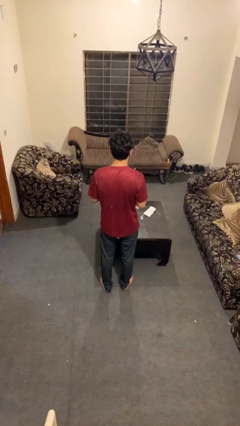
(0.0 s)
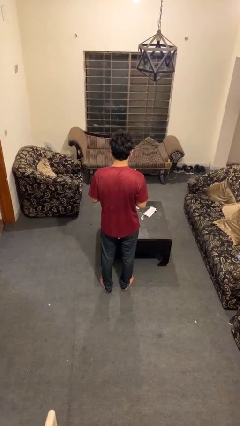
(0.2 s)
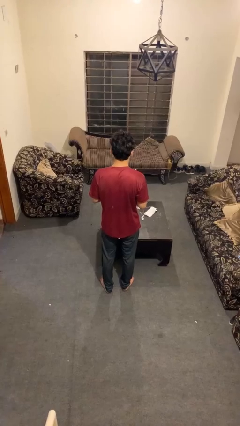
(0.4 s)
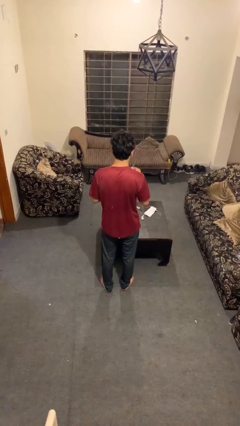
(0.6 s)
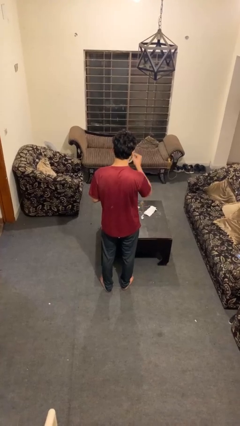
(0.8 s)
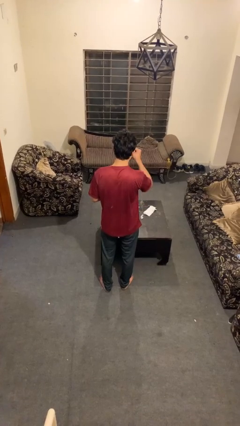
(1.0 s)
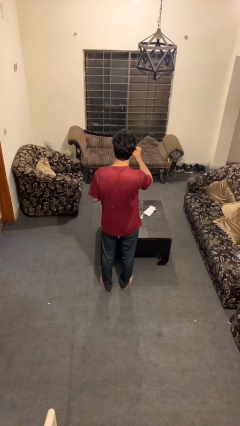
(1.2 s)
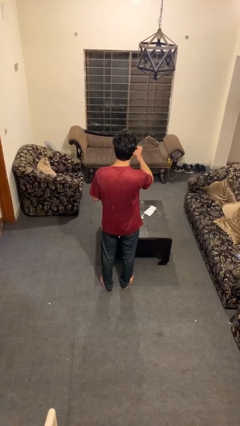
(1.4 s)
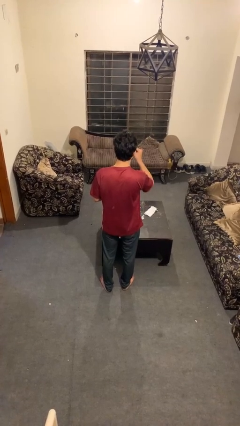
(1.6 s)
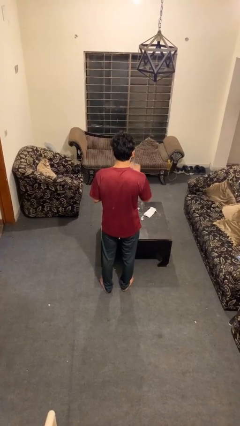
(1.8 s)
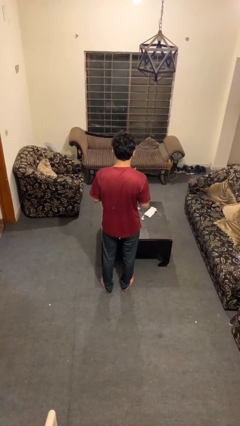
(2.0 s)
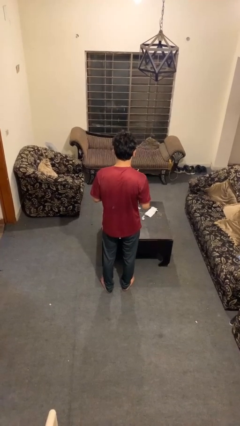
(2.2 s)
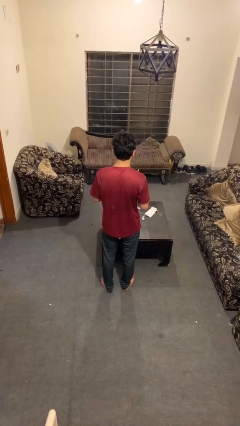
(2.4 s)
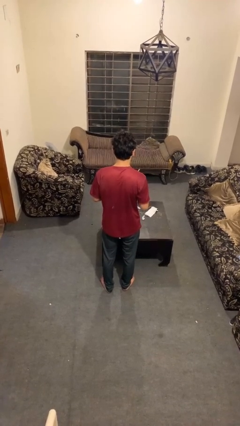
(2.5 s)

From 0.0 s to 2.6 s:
person drinks from mug

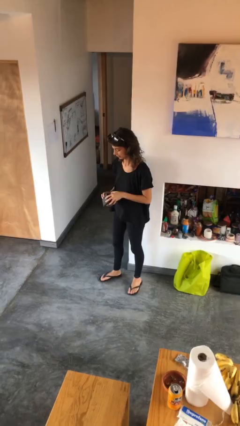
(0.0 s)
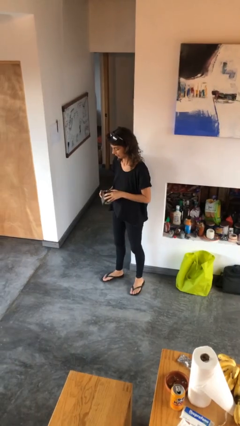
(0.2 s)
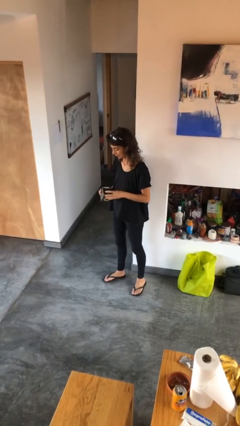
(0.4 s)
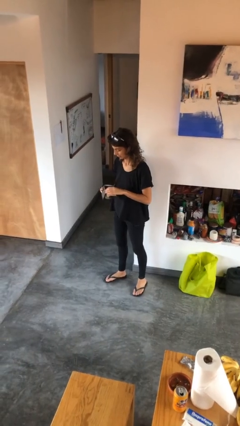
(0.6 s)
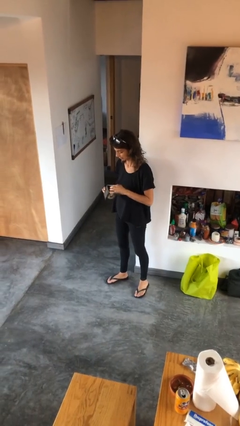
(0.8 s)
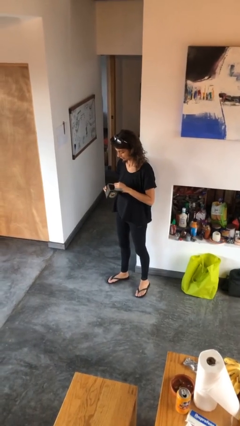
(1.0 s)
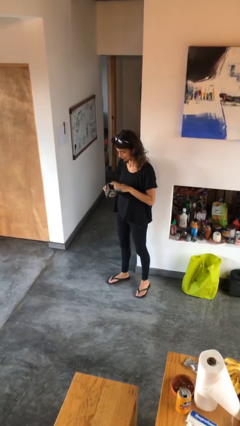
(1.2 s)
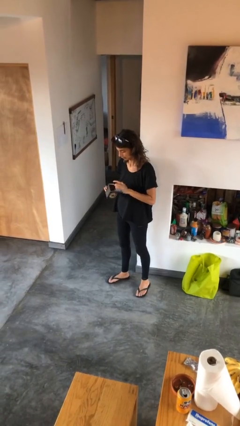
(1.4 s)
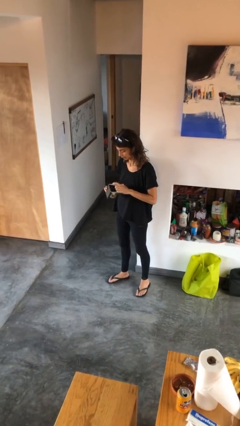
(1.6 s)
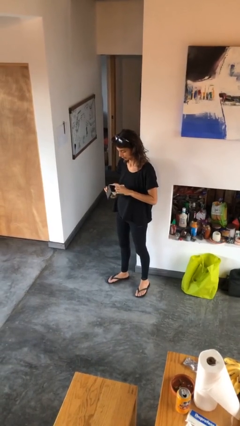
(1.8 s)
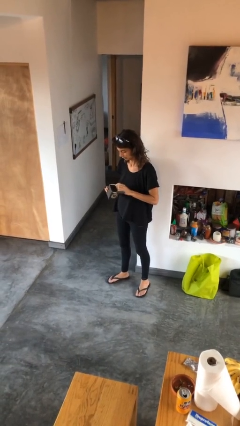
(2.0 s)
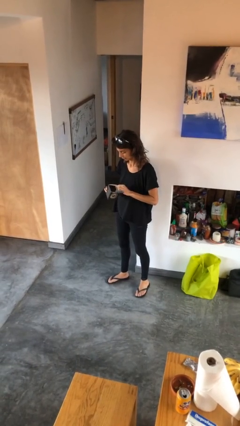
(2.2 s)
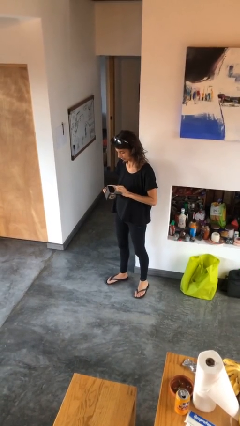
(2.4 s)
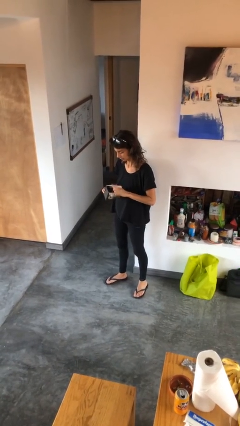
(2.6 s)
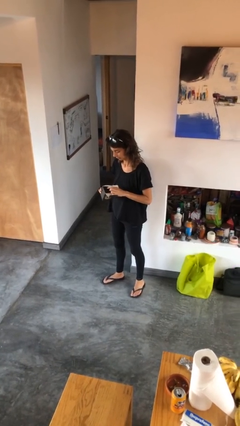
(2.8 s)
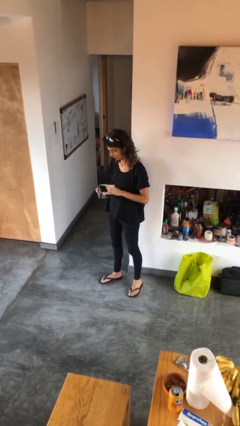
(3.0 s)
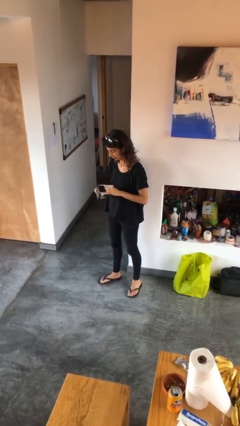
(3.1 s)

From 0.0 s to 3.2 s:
person taps object with finger

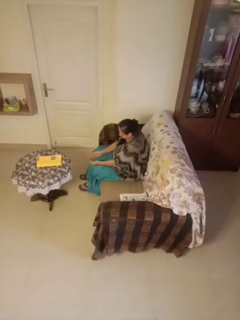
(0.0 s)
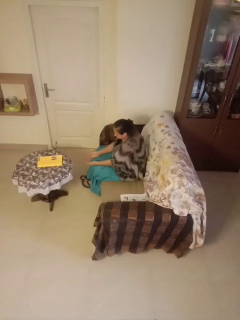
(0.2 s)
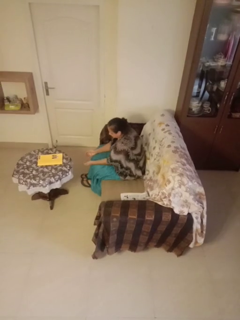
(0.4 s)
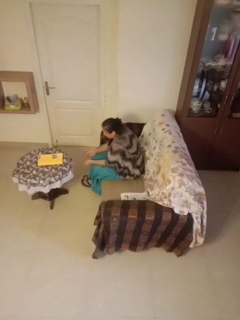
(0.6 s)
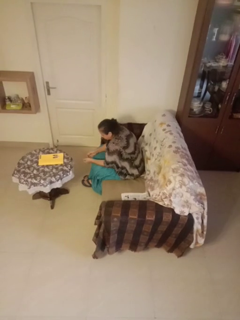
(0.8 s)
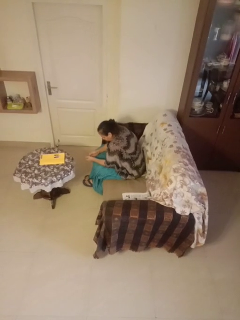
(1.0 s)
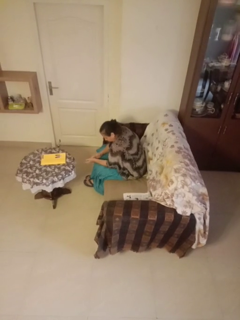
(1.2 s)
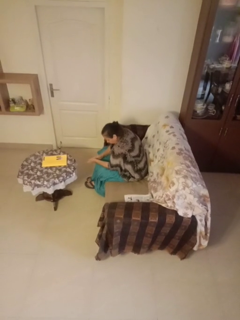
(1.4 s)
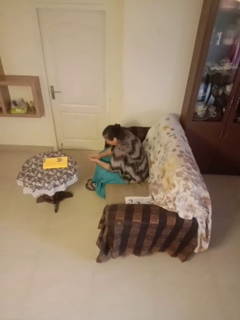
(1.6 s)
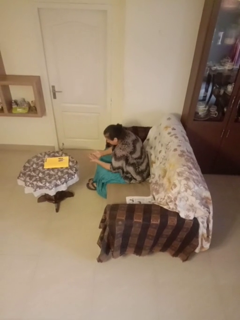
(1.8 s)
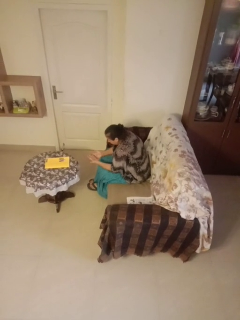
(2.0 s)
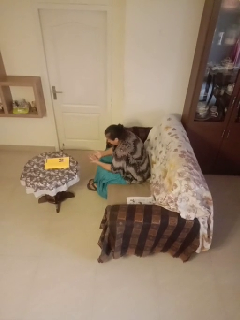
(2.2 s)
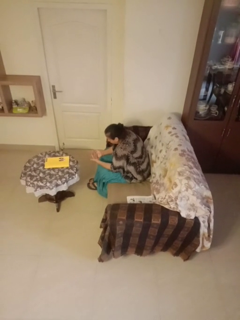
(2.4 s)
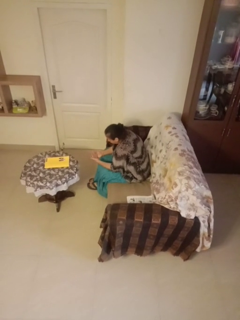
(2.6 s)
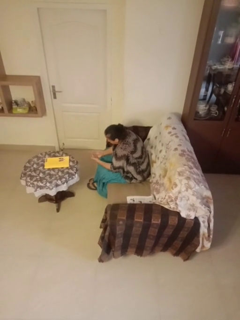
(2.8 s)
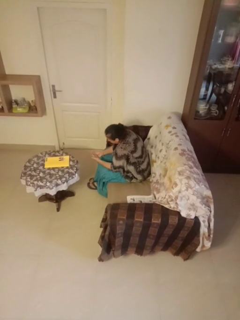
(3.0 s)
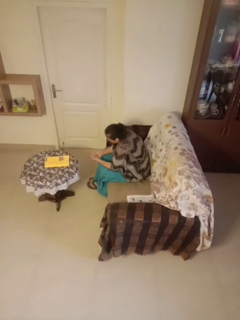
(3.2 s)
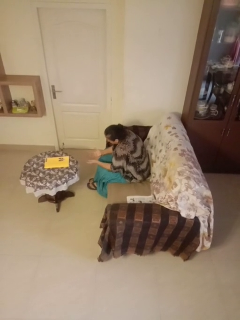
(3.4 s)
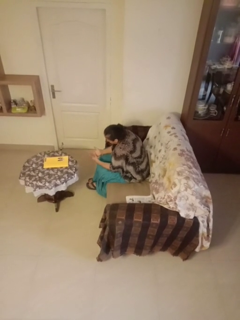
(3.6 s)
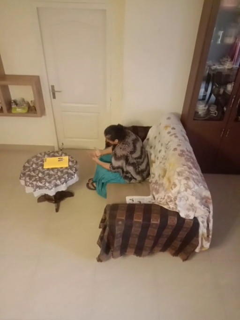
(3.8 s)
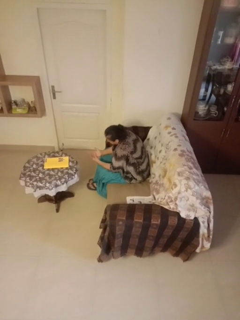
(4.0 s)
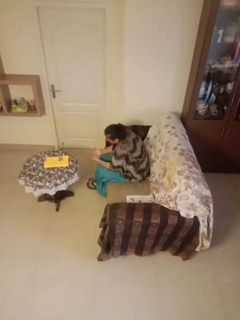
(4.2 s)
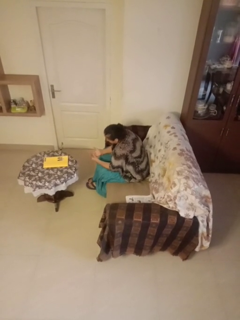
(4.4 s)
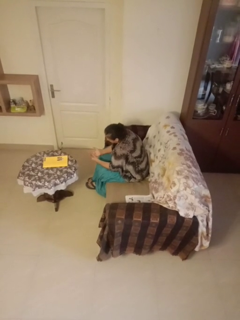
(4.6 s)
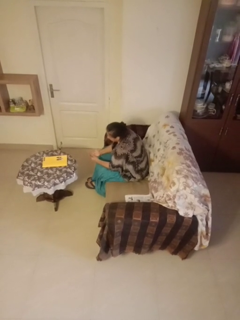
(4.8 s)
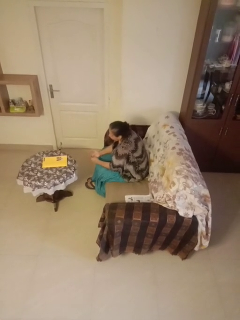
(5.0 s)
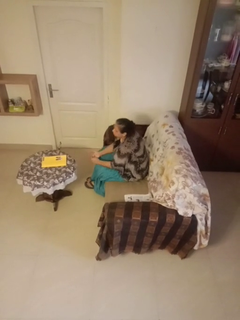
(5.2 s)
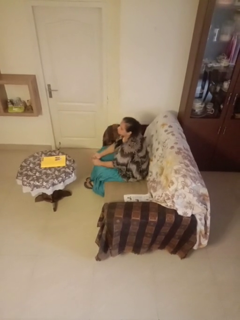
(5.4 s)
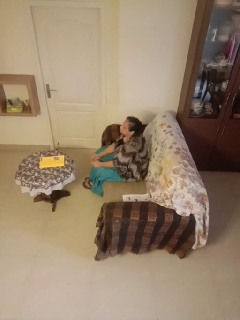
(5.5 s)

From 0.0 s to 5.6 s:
person looks at hands in lap

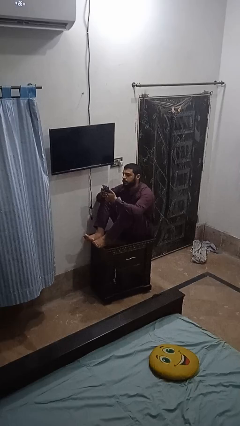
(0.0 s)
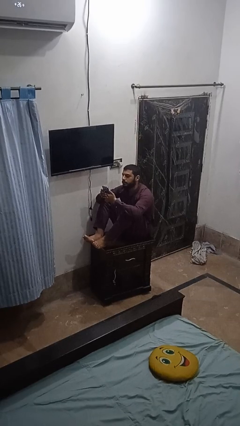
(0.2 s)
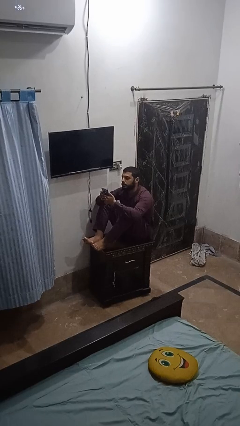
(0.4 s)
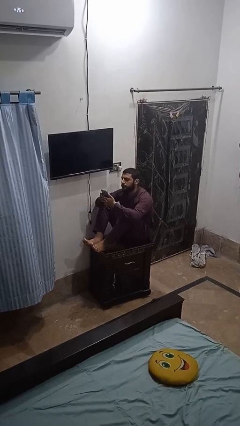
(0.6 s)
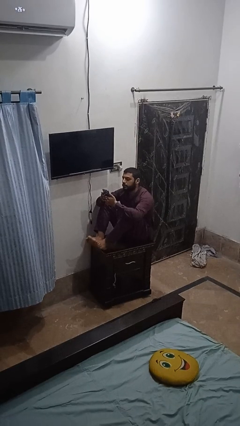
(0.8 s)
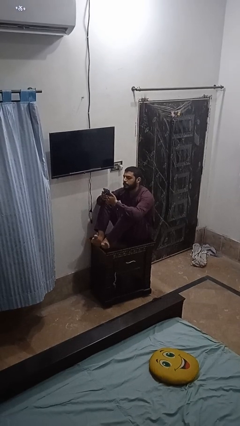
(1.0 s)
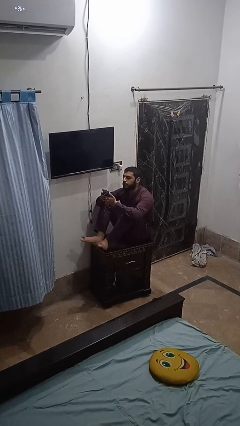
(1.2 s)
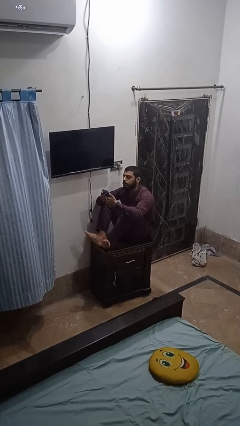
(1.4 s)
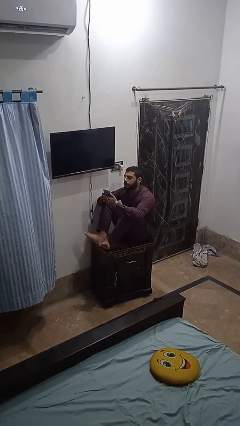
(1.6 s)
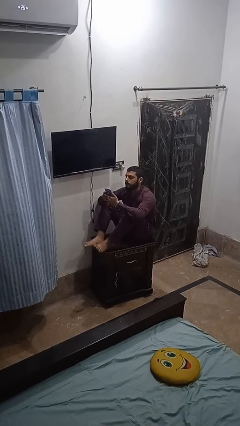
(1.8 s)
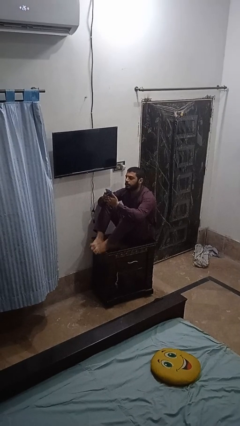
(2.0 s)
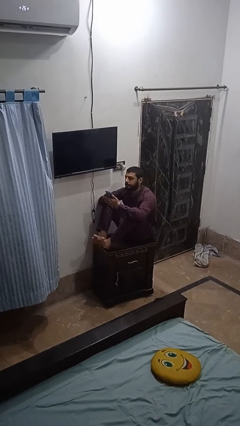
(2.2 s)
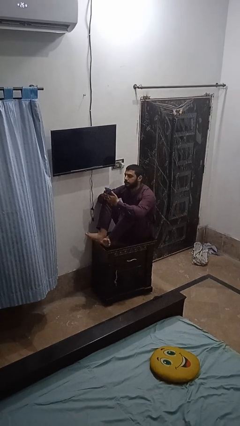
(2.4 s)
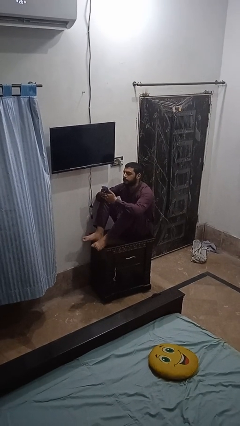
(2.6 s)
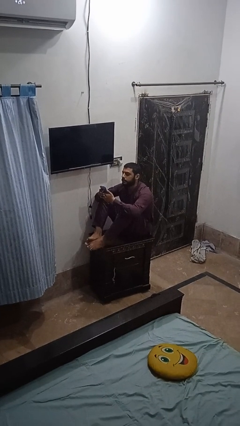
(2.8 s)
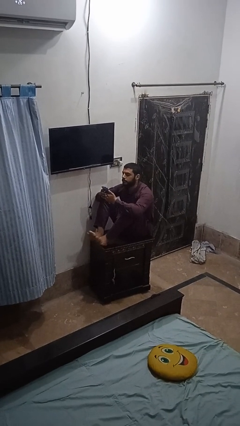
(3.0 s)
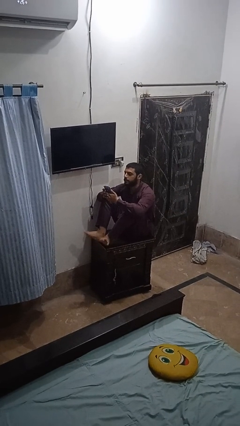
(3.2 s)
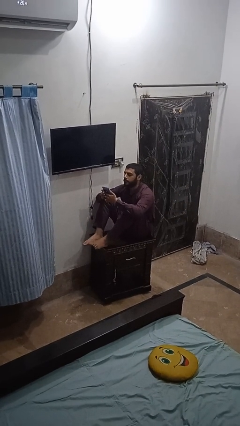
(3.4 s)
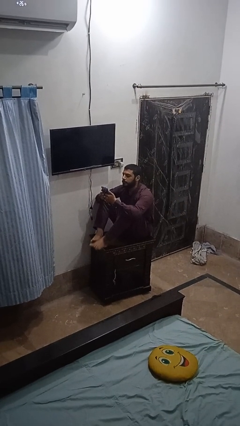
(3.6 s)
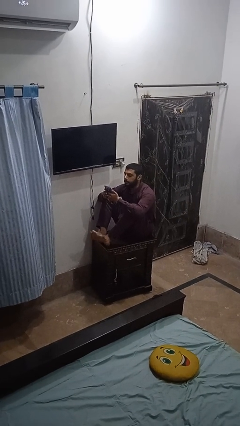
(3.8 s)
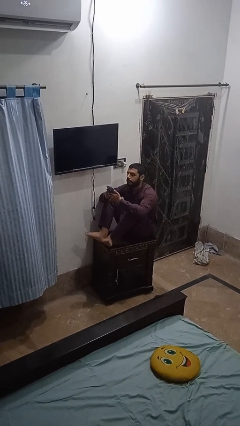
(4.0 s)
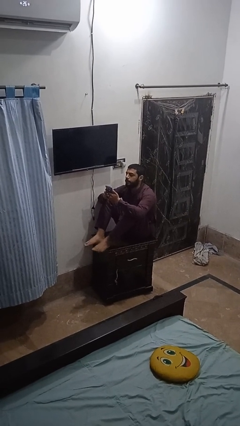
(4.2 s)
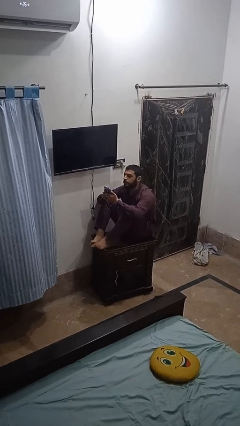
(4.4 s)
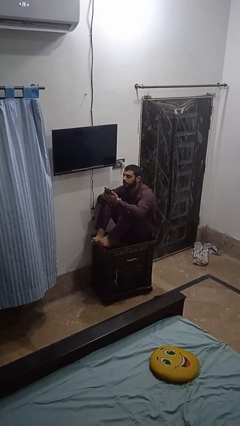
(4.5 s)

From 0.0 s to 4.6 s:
person twirls

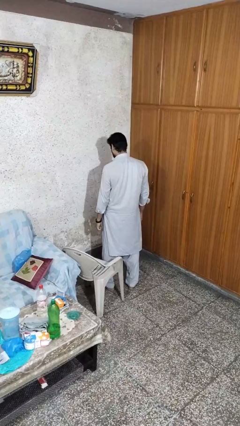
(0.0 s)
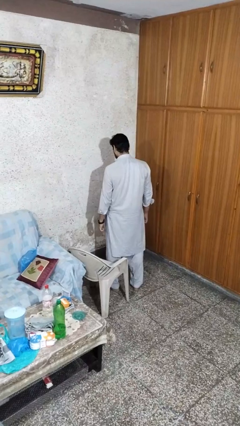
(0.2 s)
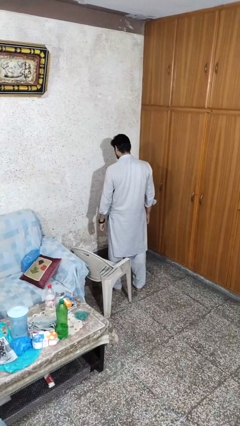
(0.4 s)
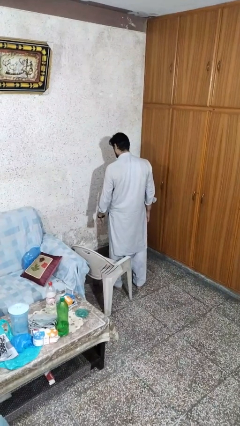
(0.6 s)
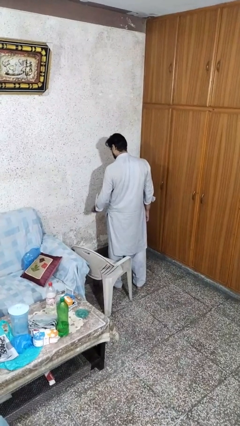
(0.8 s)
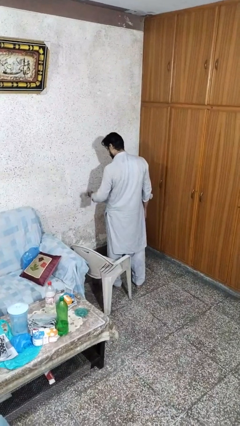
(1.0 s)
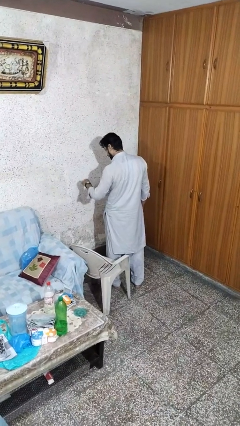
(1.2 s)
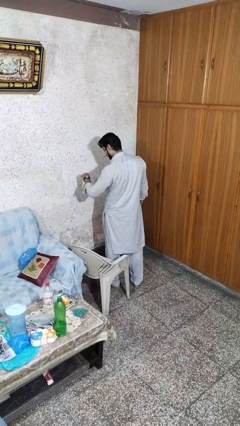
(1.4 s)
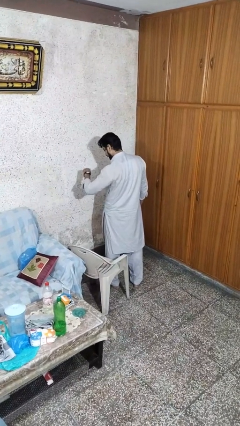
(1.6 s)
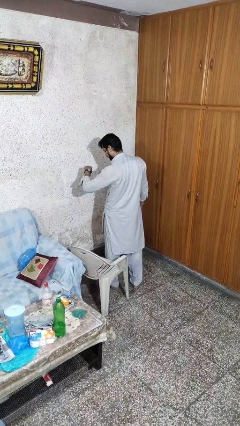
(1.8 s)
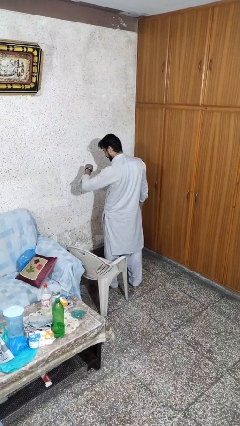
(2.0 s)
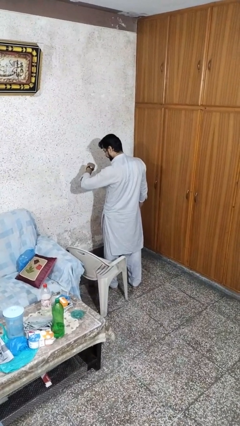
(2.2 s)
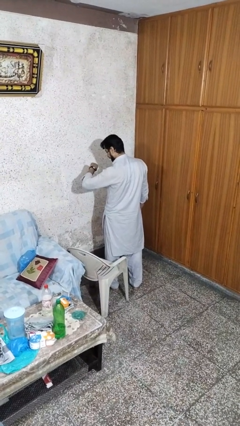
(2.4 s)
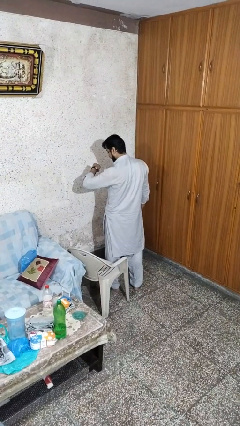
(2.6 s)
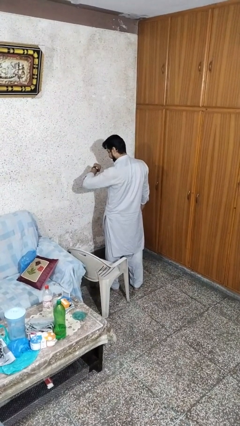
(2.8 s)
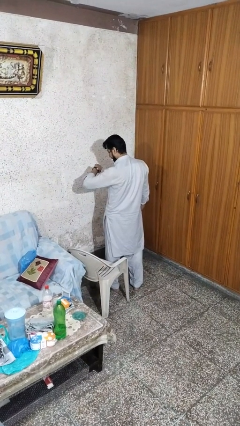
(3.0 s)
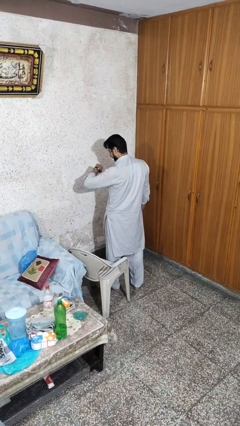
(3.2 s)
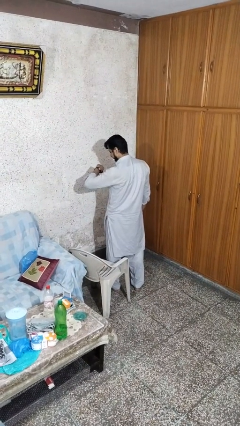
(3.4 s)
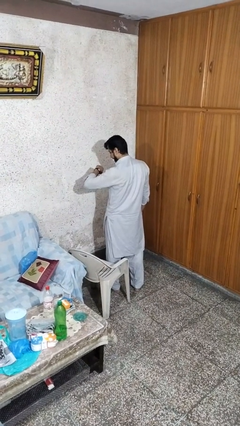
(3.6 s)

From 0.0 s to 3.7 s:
person looks at wristwatch
